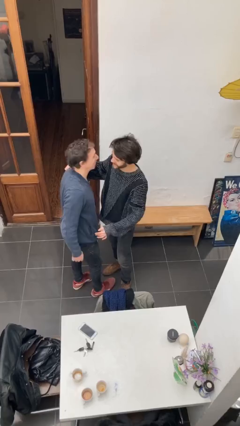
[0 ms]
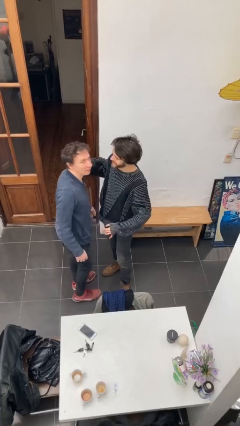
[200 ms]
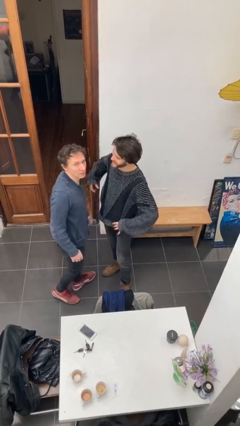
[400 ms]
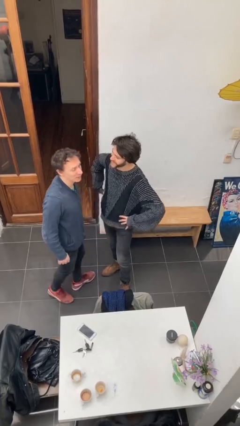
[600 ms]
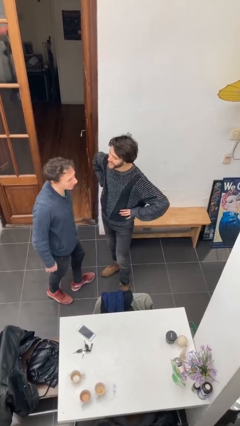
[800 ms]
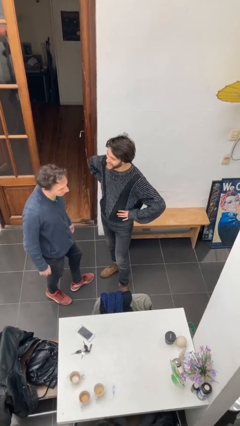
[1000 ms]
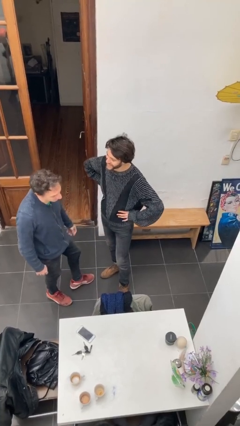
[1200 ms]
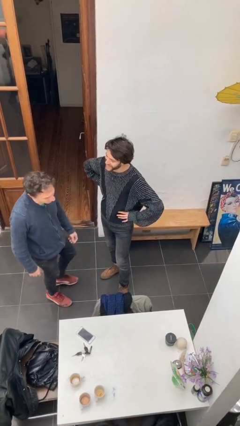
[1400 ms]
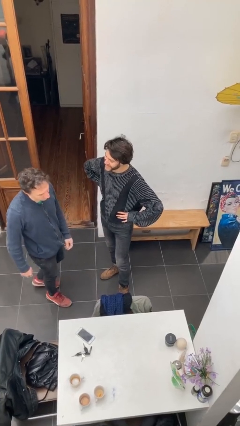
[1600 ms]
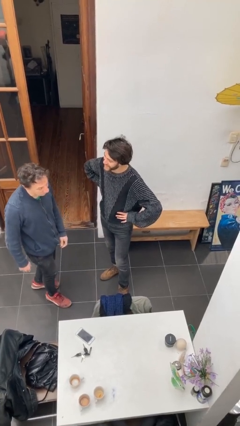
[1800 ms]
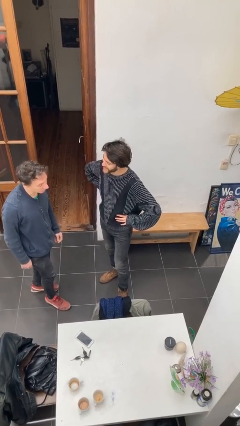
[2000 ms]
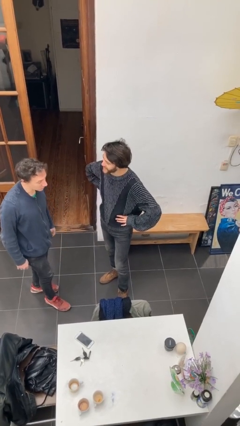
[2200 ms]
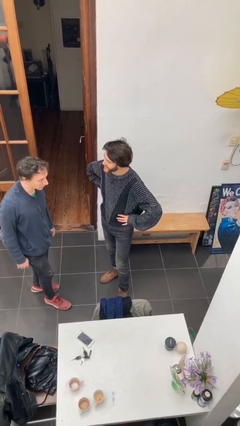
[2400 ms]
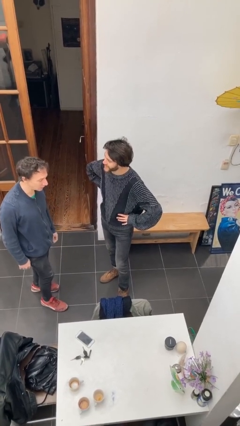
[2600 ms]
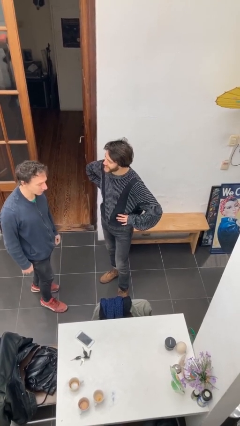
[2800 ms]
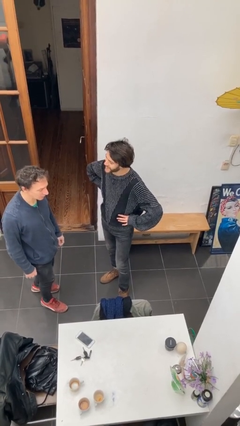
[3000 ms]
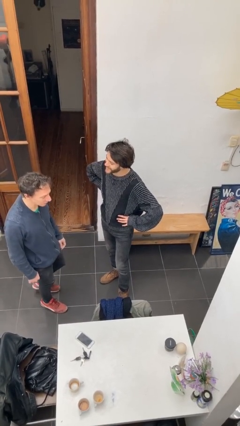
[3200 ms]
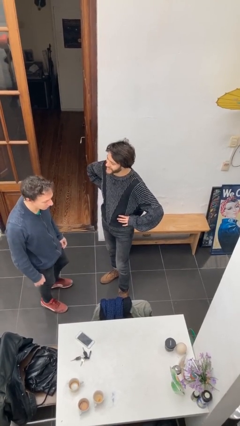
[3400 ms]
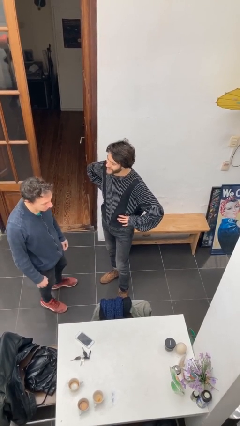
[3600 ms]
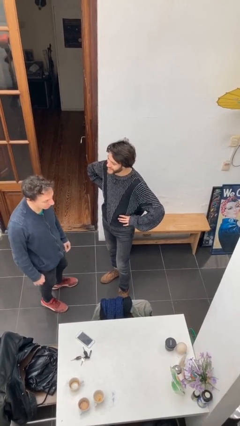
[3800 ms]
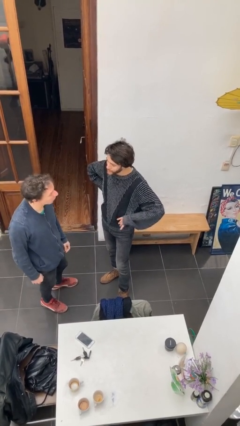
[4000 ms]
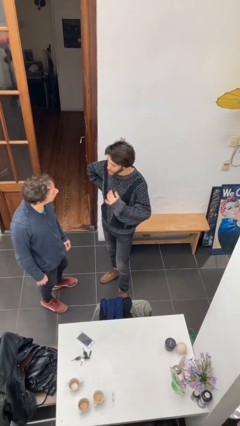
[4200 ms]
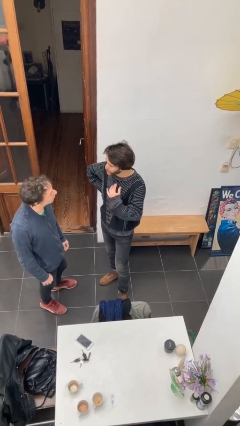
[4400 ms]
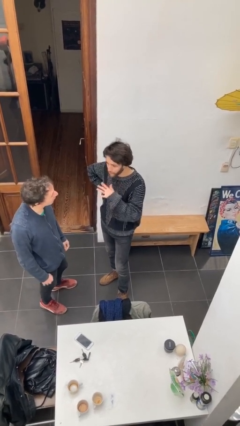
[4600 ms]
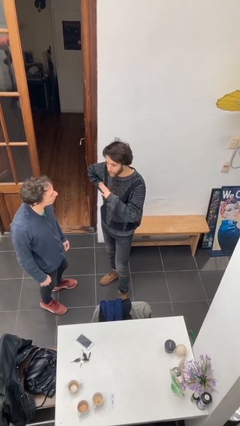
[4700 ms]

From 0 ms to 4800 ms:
person talks to person

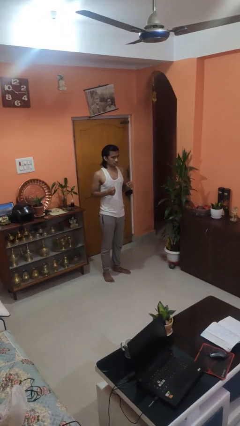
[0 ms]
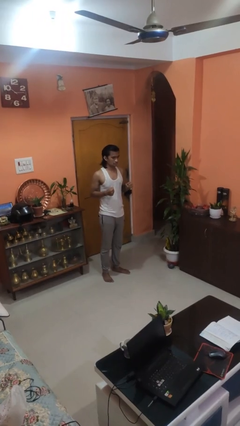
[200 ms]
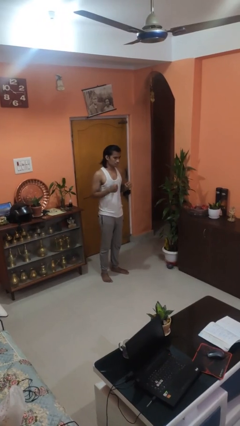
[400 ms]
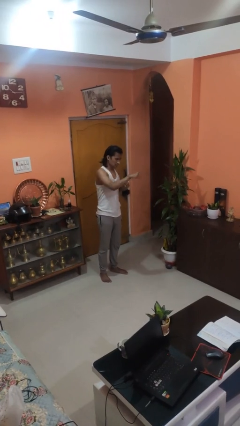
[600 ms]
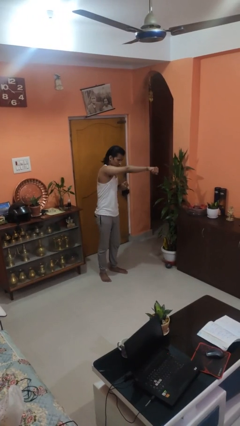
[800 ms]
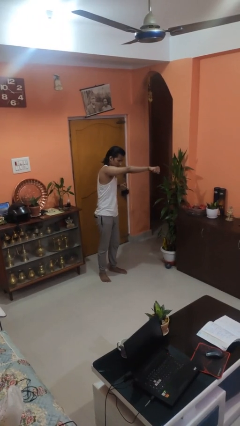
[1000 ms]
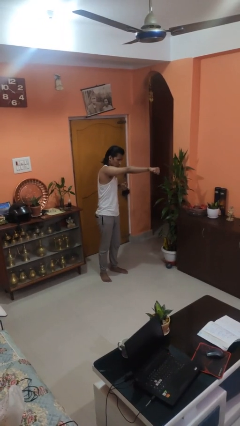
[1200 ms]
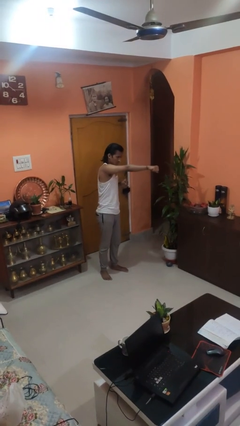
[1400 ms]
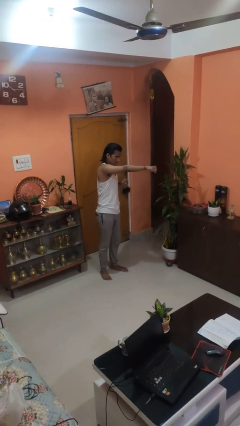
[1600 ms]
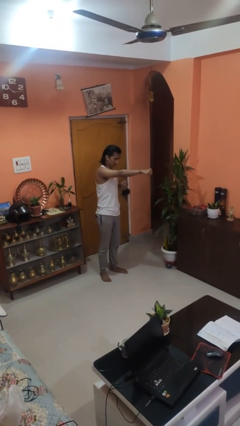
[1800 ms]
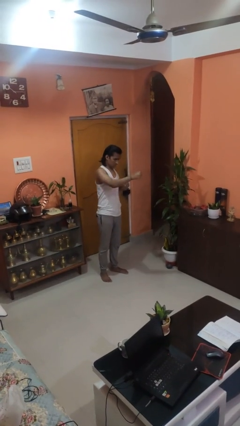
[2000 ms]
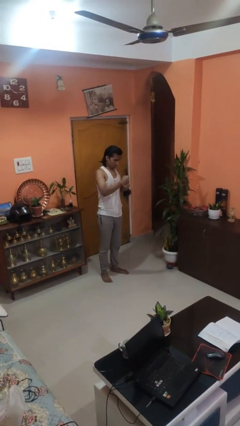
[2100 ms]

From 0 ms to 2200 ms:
person punches

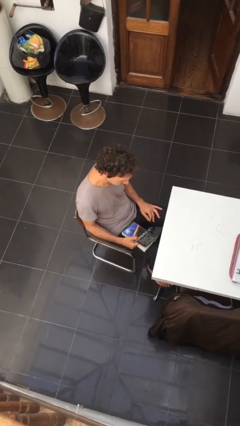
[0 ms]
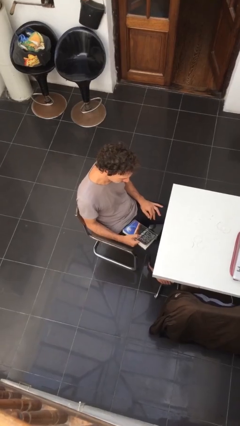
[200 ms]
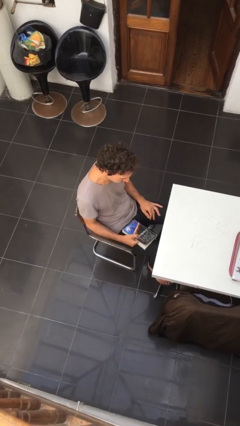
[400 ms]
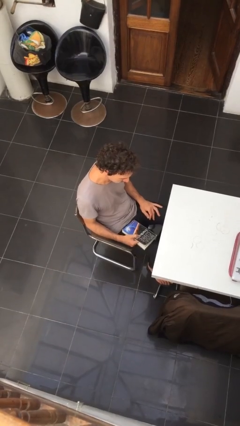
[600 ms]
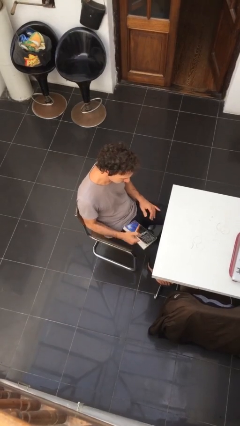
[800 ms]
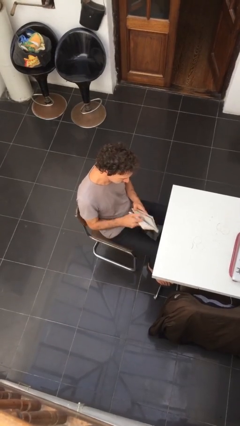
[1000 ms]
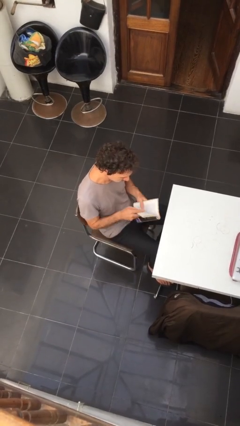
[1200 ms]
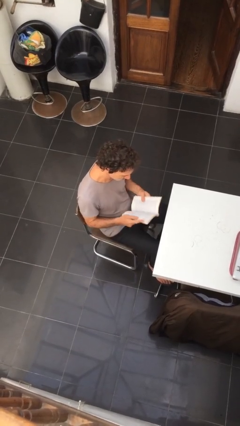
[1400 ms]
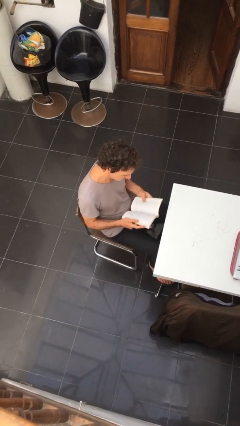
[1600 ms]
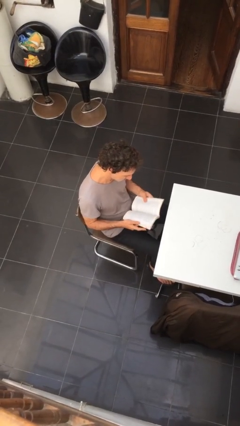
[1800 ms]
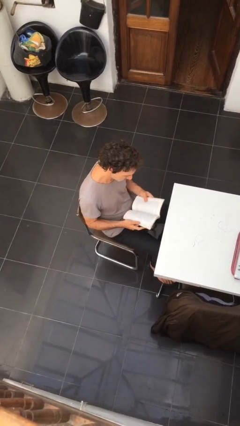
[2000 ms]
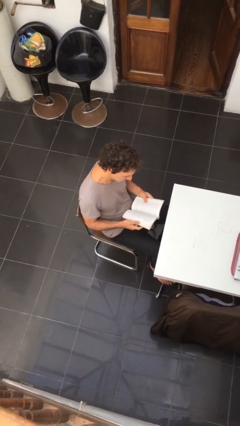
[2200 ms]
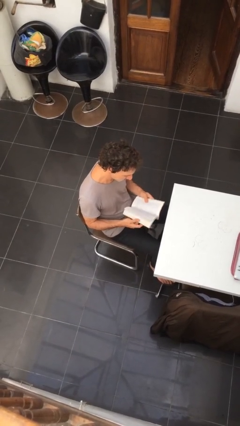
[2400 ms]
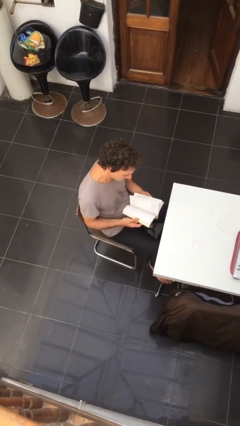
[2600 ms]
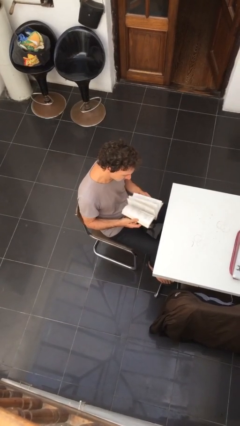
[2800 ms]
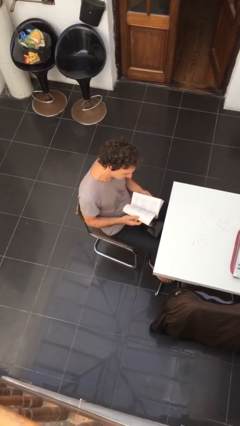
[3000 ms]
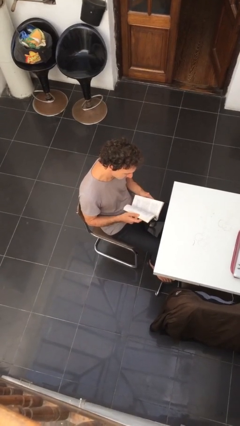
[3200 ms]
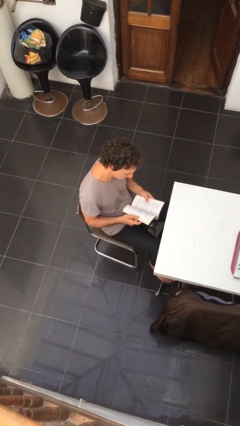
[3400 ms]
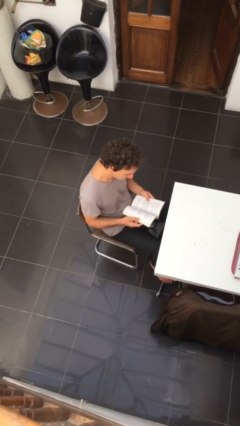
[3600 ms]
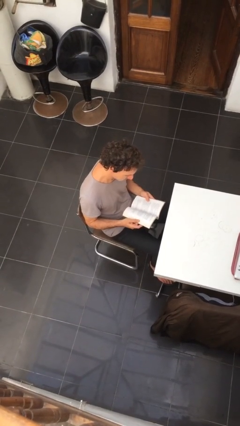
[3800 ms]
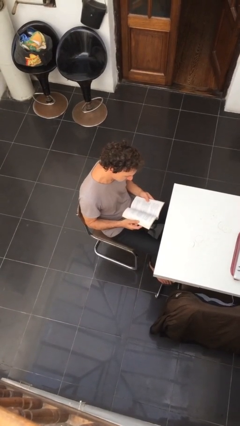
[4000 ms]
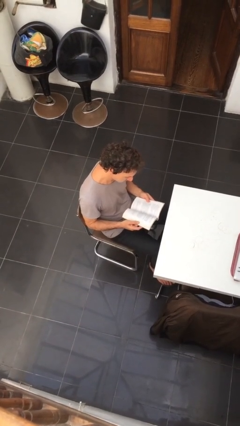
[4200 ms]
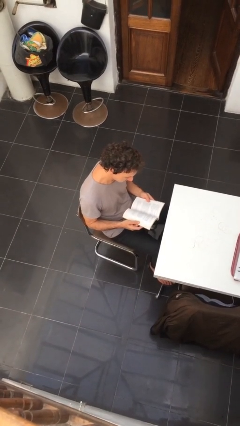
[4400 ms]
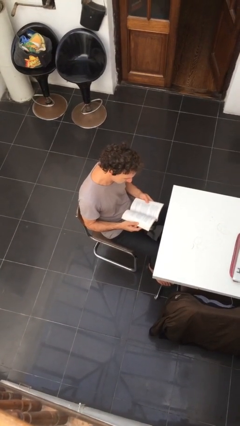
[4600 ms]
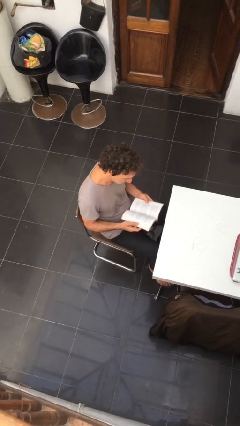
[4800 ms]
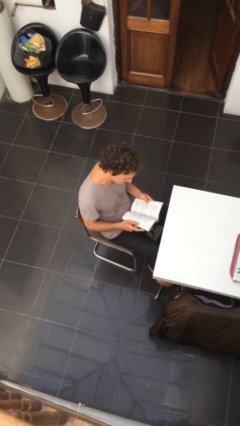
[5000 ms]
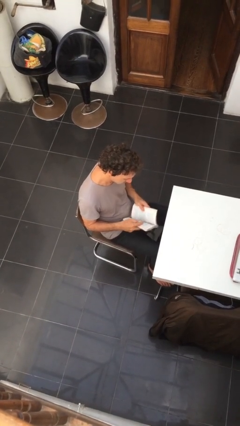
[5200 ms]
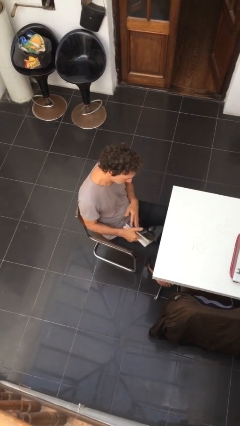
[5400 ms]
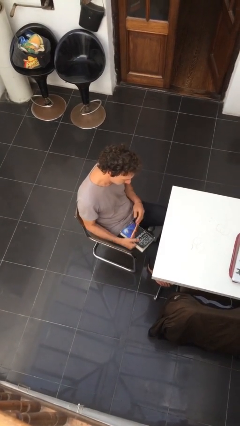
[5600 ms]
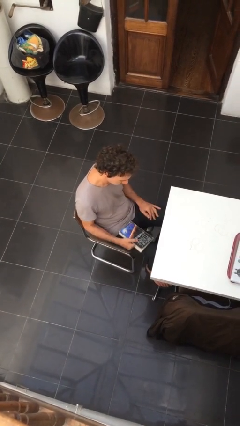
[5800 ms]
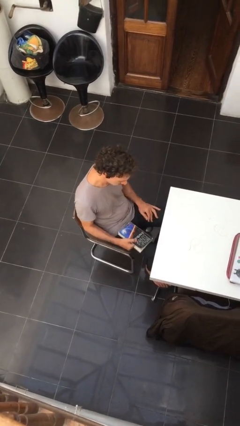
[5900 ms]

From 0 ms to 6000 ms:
person reads document

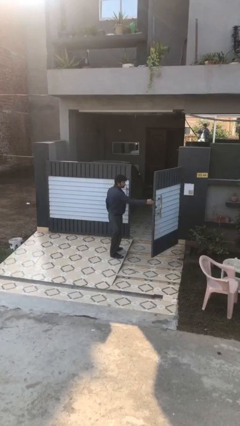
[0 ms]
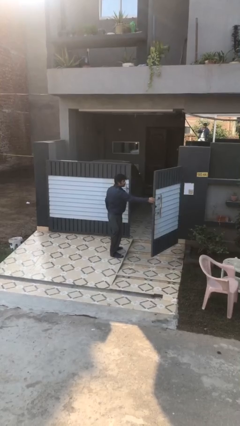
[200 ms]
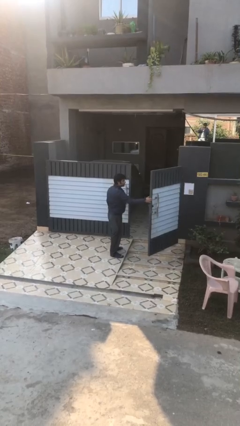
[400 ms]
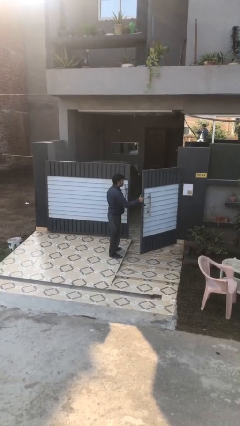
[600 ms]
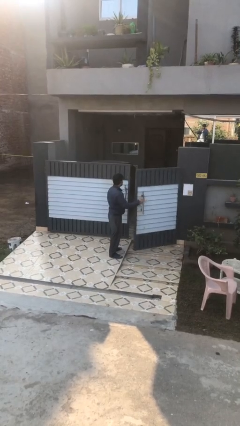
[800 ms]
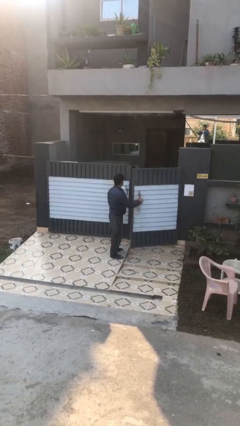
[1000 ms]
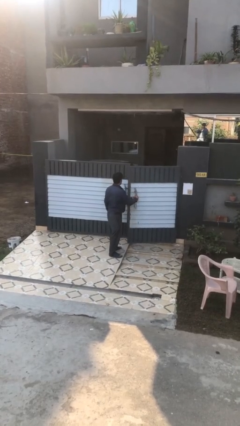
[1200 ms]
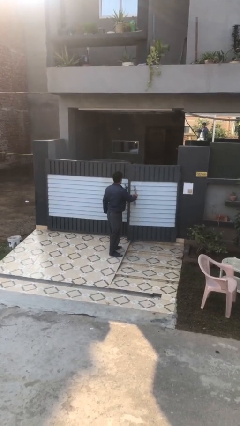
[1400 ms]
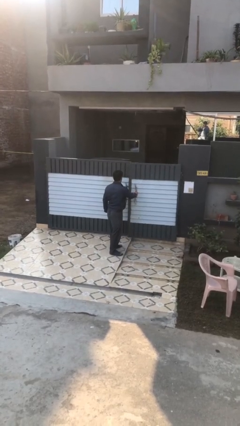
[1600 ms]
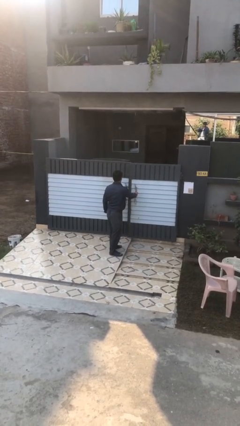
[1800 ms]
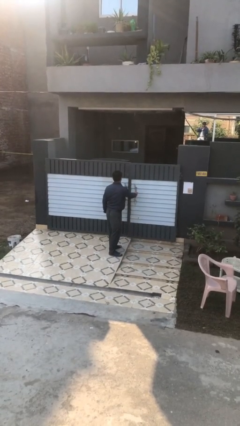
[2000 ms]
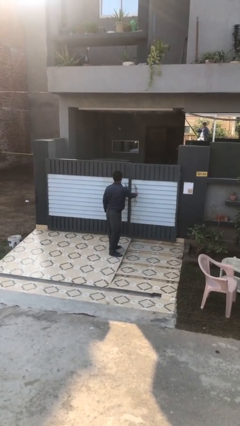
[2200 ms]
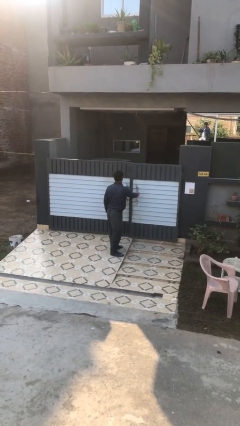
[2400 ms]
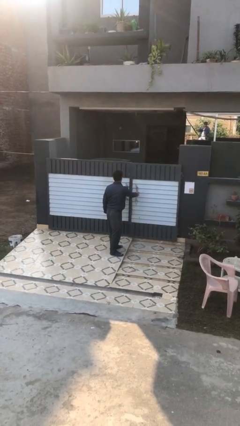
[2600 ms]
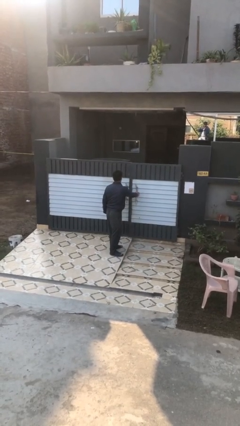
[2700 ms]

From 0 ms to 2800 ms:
person closes facility door

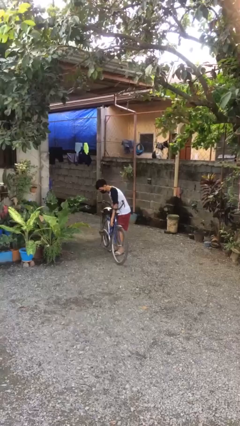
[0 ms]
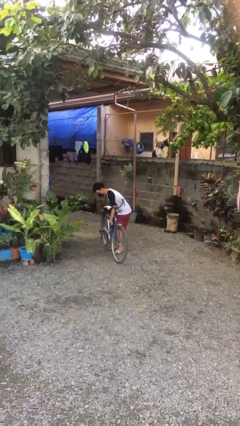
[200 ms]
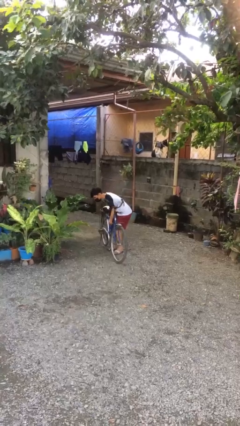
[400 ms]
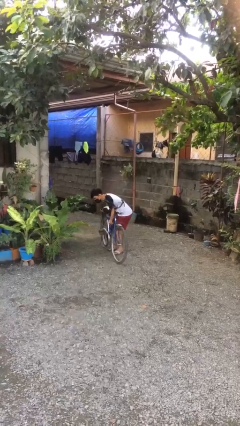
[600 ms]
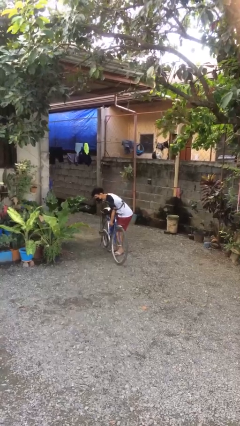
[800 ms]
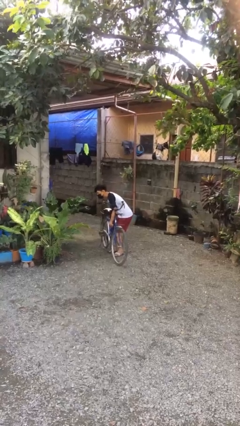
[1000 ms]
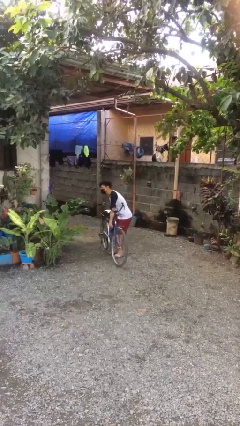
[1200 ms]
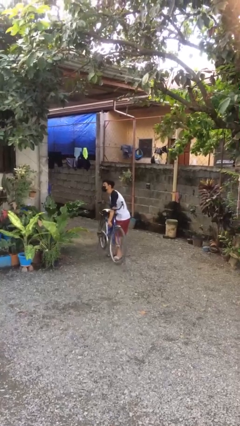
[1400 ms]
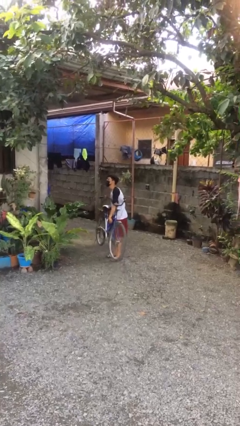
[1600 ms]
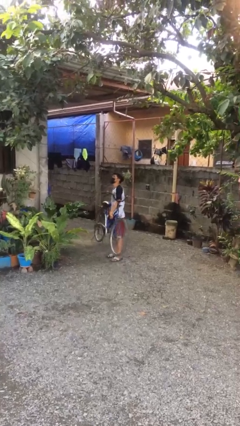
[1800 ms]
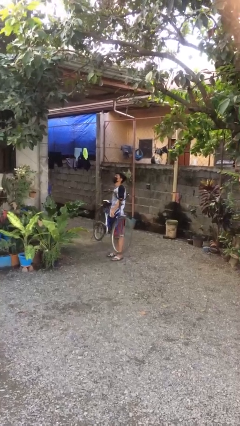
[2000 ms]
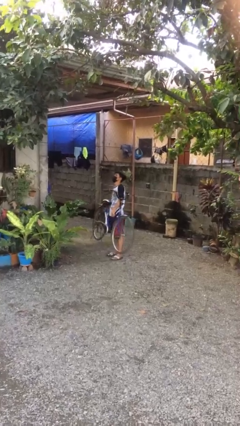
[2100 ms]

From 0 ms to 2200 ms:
person picks up object from floor
